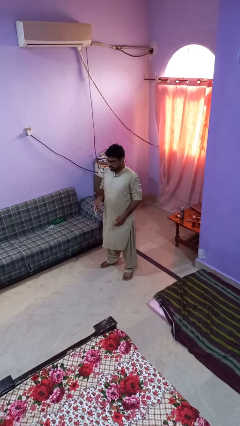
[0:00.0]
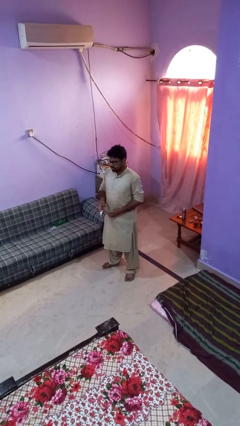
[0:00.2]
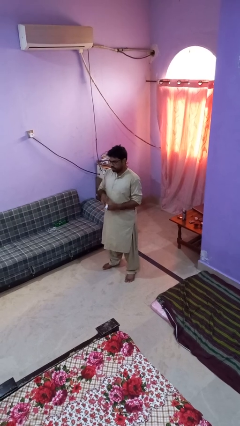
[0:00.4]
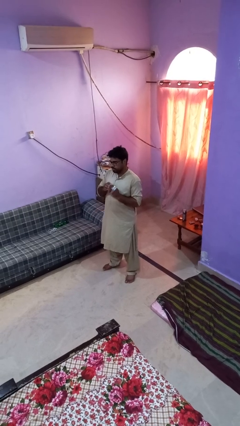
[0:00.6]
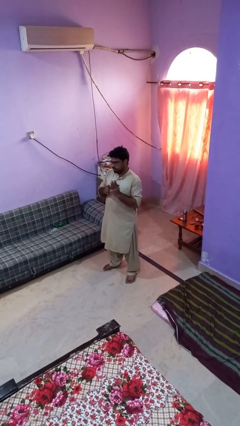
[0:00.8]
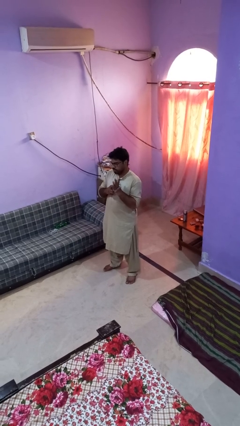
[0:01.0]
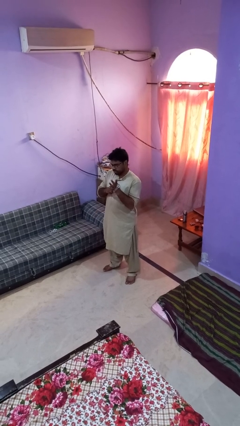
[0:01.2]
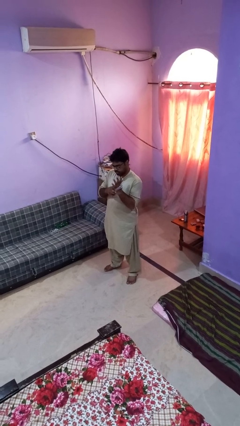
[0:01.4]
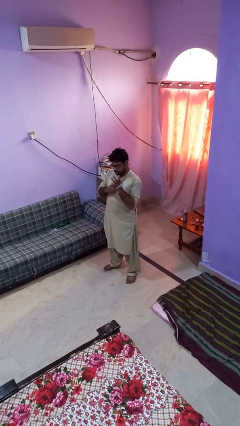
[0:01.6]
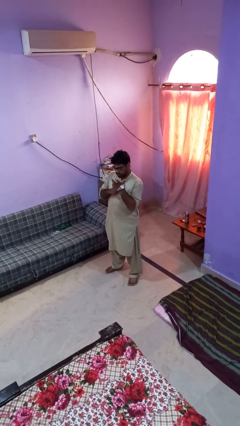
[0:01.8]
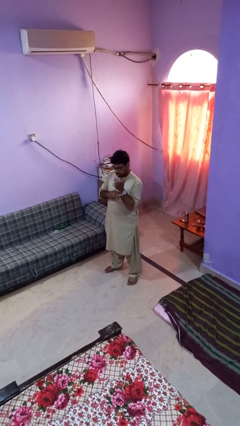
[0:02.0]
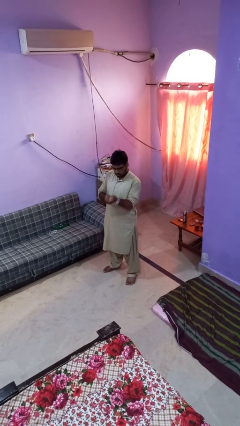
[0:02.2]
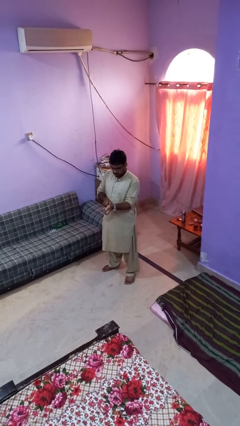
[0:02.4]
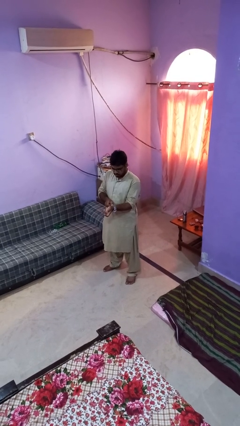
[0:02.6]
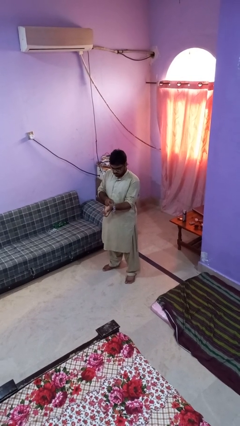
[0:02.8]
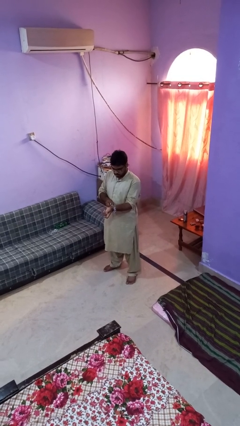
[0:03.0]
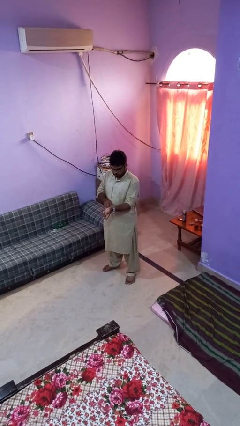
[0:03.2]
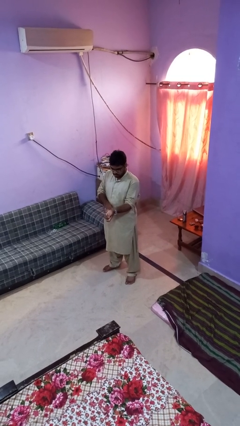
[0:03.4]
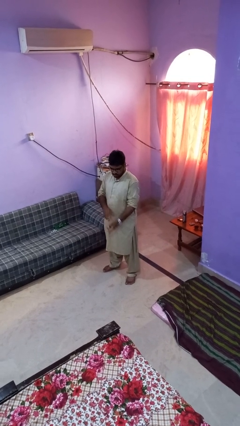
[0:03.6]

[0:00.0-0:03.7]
person puts on wristwatch

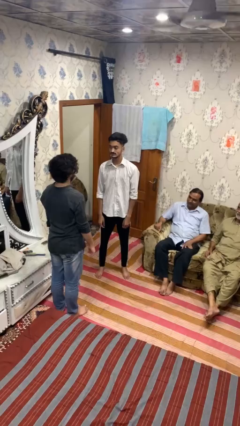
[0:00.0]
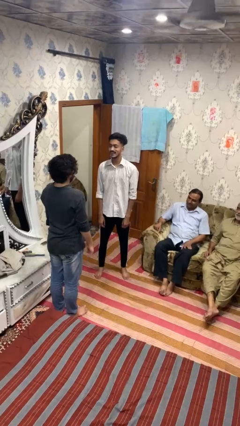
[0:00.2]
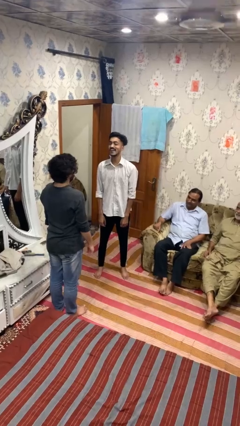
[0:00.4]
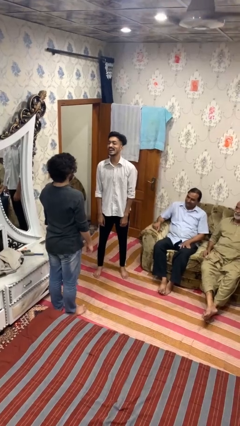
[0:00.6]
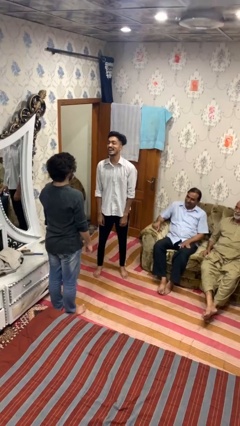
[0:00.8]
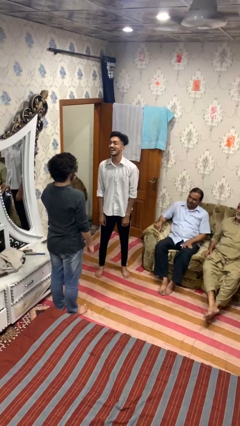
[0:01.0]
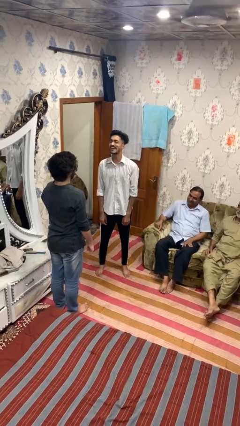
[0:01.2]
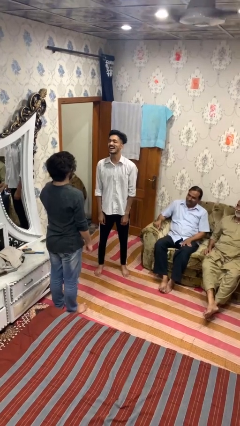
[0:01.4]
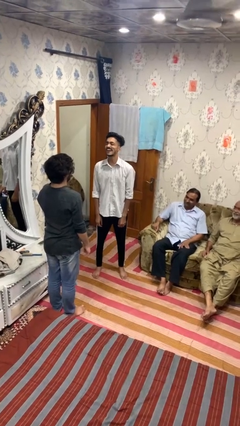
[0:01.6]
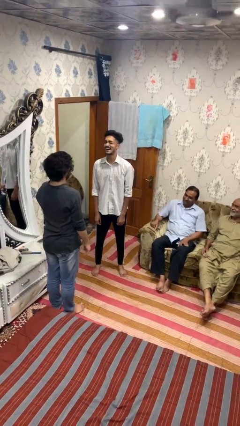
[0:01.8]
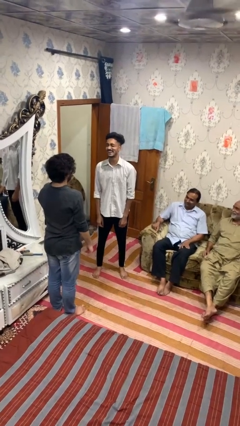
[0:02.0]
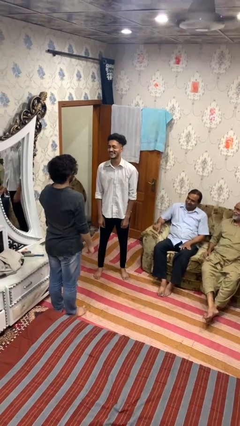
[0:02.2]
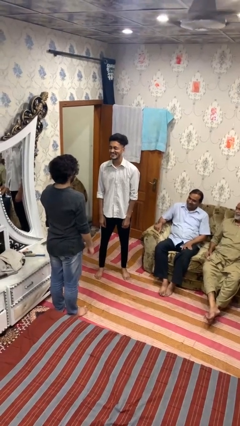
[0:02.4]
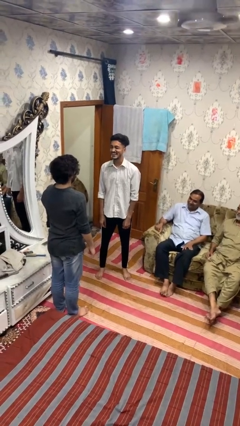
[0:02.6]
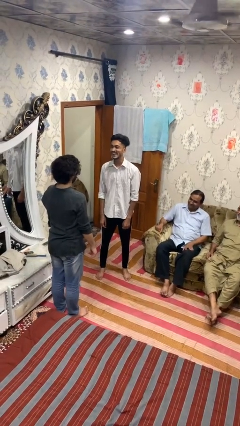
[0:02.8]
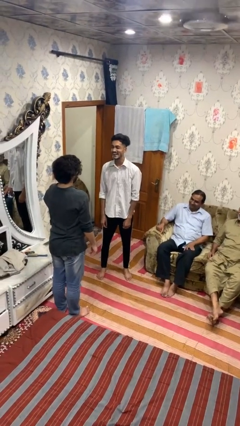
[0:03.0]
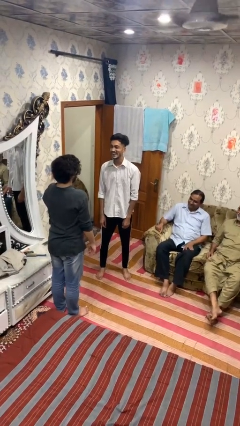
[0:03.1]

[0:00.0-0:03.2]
person laughs with person

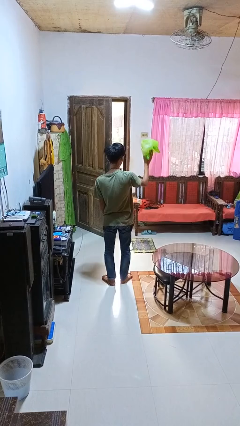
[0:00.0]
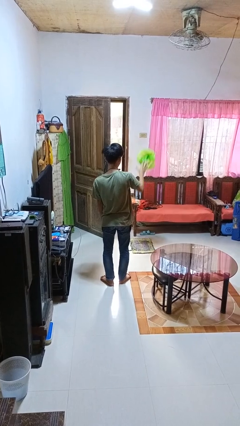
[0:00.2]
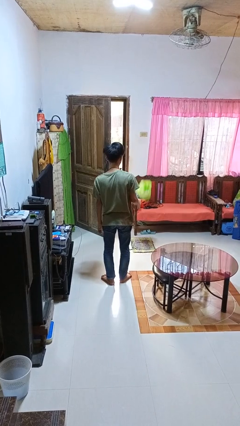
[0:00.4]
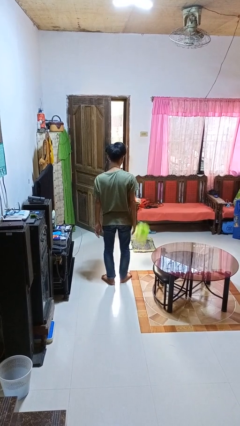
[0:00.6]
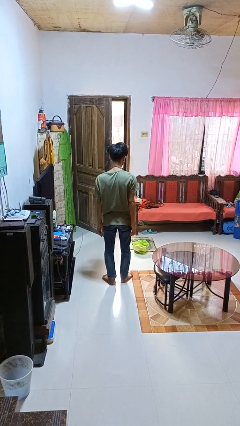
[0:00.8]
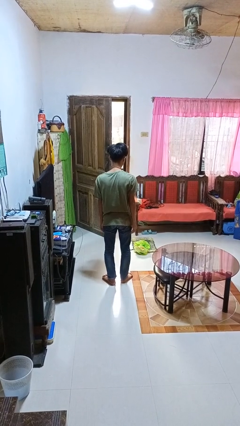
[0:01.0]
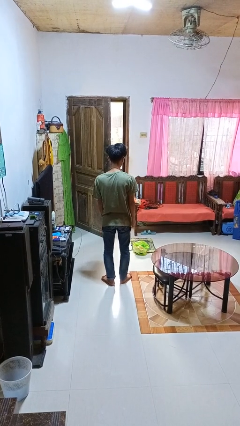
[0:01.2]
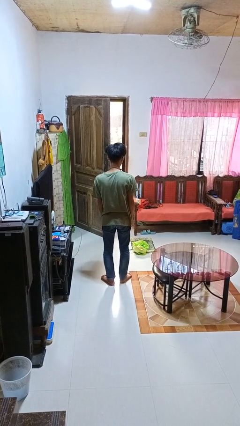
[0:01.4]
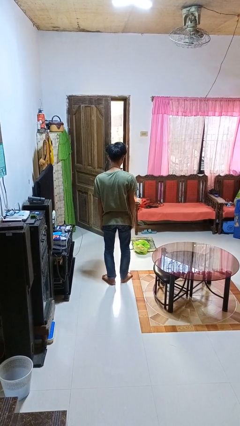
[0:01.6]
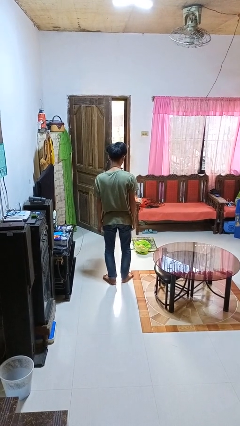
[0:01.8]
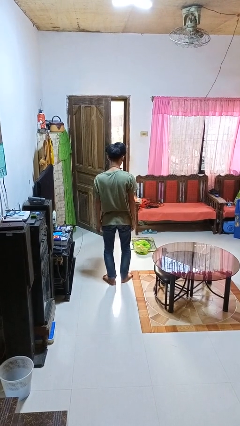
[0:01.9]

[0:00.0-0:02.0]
person throws object to ground

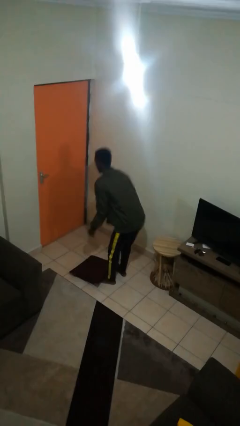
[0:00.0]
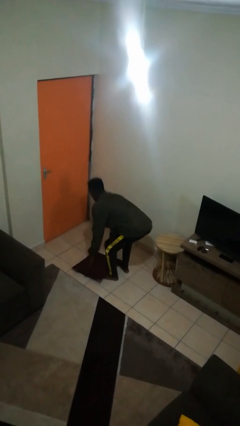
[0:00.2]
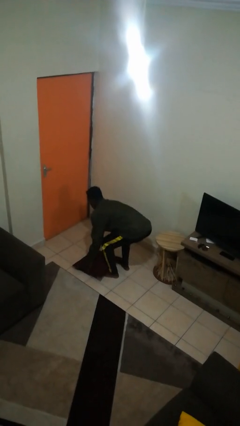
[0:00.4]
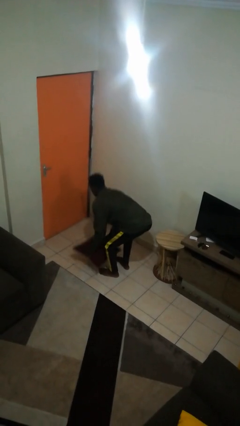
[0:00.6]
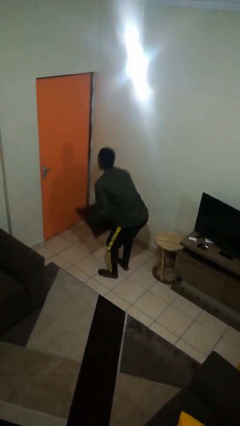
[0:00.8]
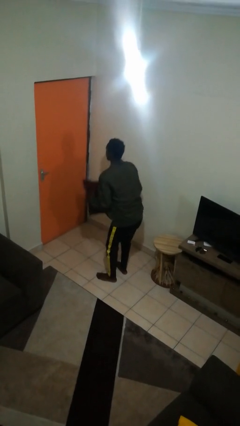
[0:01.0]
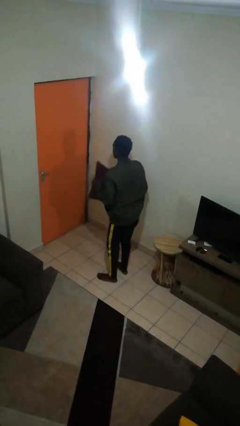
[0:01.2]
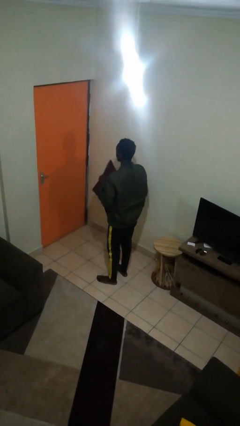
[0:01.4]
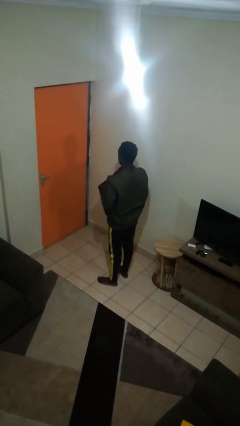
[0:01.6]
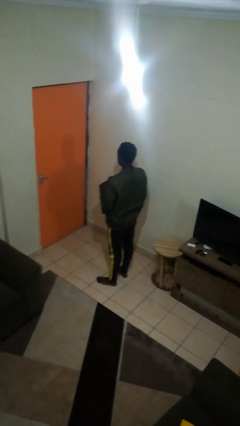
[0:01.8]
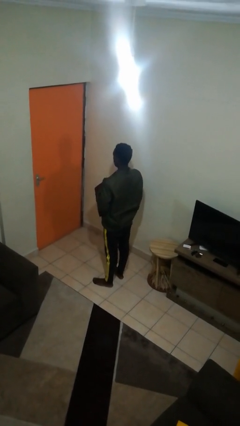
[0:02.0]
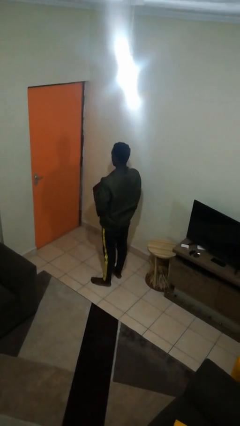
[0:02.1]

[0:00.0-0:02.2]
person picks up object from floor

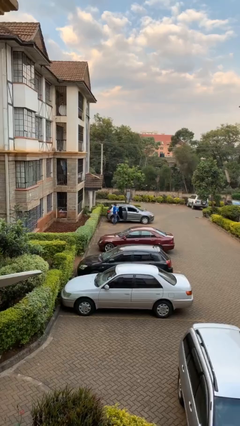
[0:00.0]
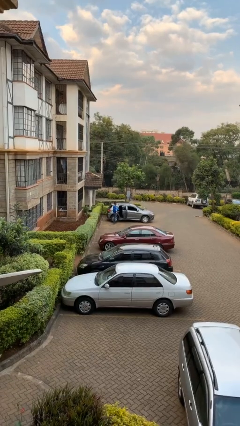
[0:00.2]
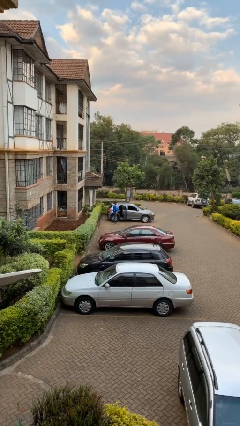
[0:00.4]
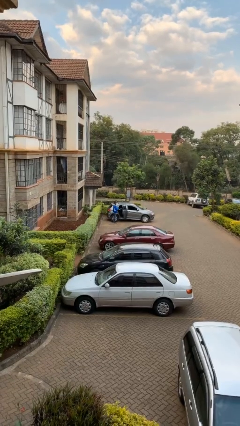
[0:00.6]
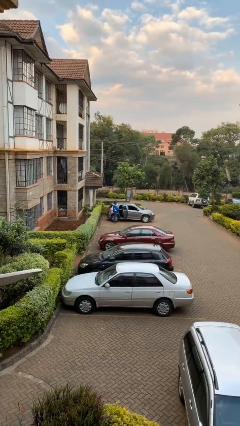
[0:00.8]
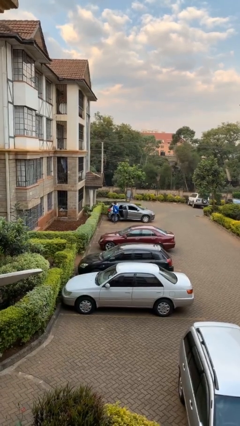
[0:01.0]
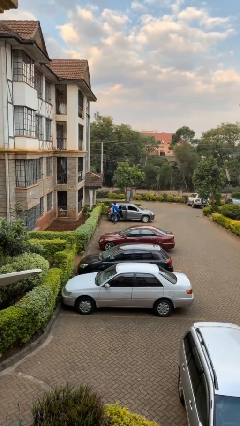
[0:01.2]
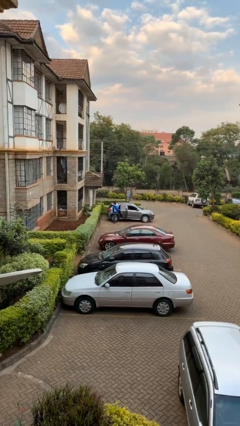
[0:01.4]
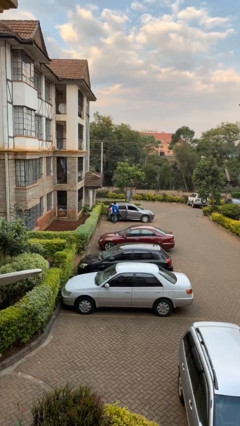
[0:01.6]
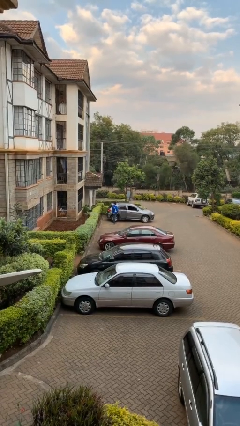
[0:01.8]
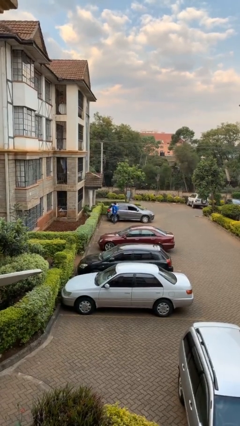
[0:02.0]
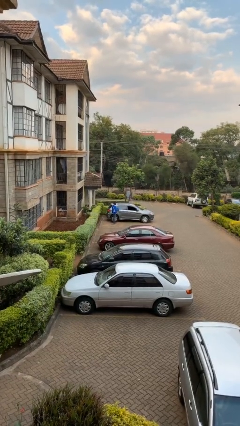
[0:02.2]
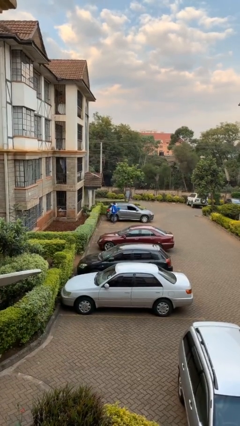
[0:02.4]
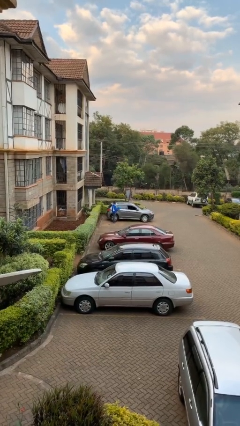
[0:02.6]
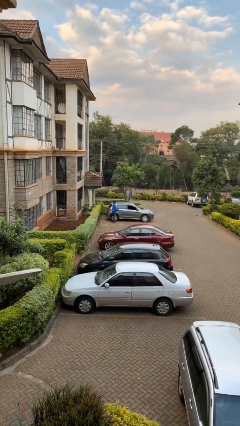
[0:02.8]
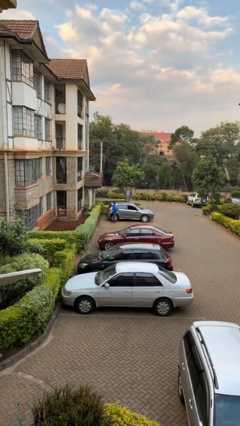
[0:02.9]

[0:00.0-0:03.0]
person closes car door

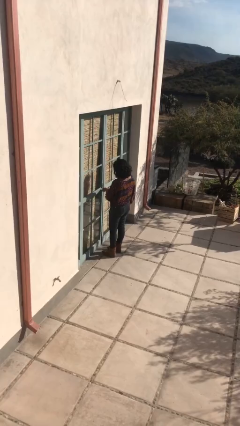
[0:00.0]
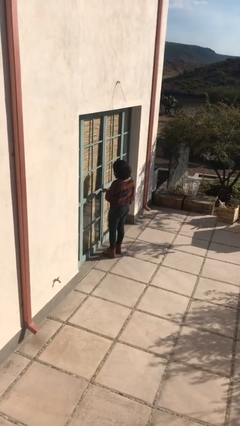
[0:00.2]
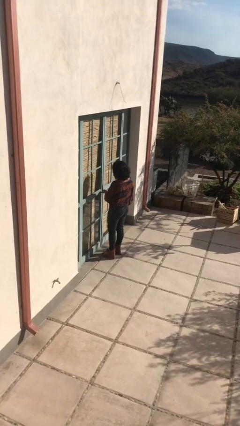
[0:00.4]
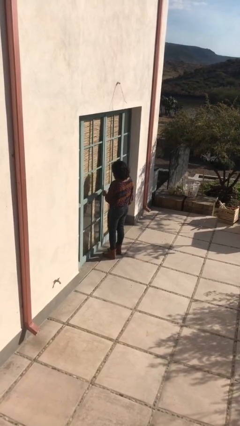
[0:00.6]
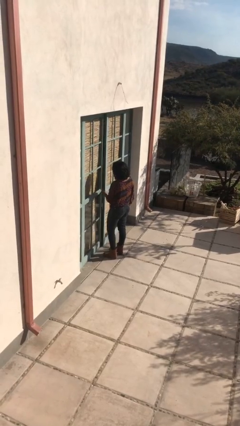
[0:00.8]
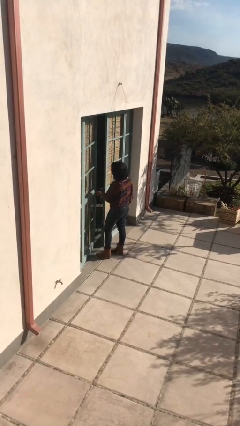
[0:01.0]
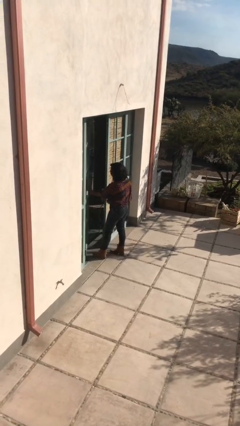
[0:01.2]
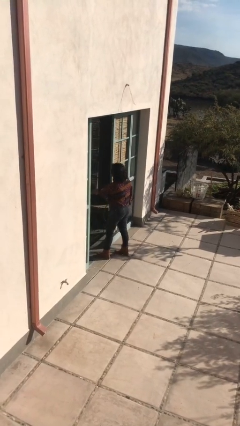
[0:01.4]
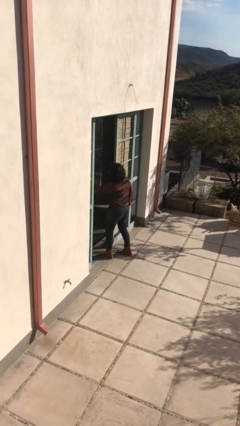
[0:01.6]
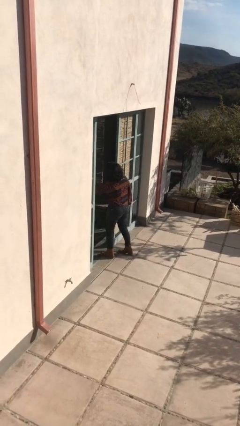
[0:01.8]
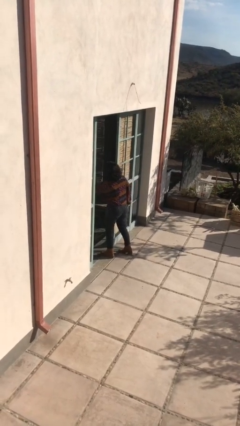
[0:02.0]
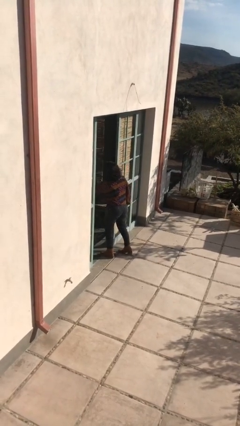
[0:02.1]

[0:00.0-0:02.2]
person opens facility door

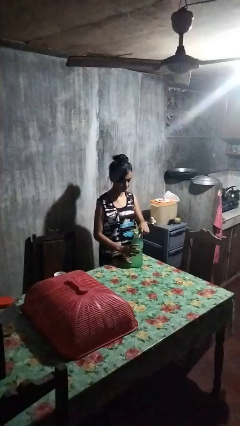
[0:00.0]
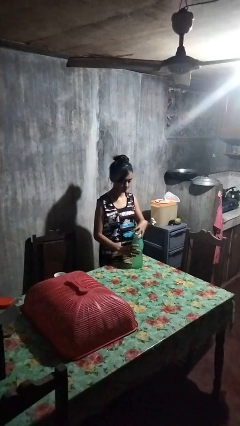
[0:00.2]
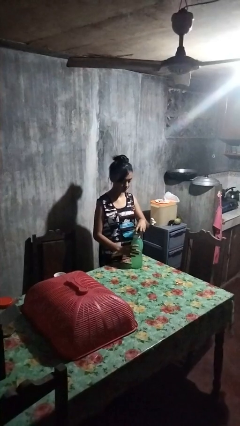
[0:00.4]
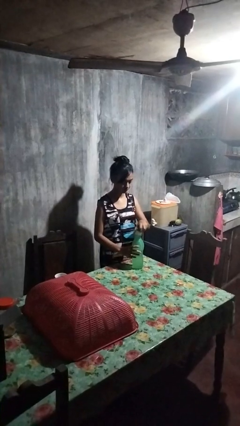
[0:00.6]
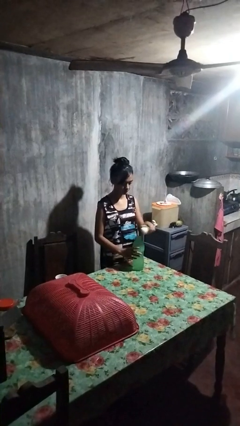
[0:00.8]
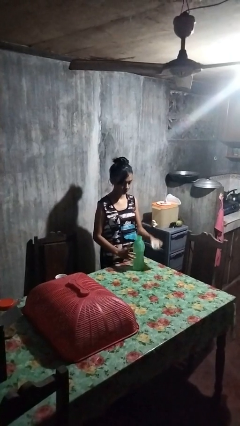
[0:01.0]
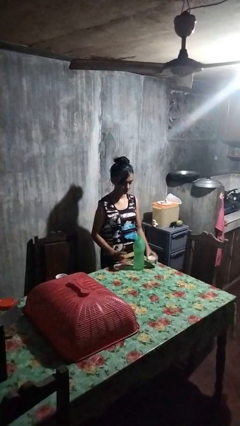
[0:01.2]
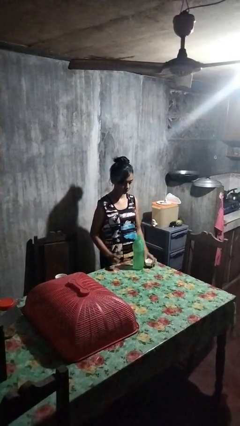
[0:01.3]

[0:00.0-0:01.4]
person unscrews lid from bottle
